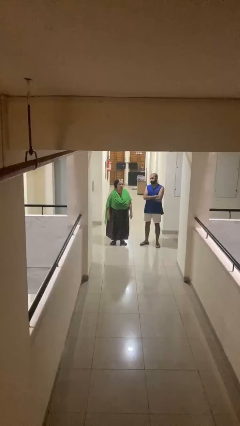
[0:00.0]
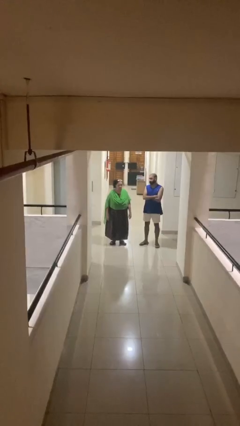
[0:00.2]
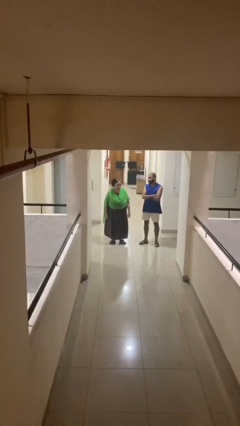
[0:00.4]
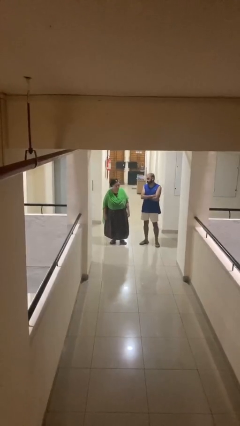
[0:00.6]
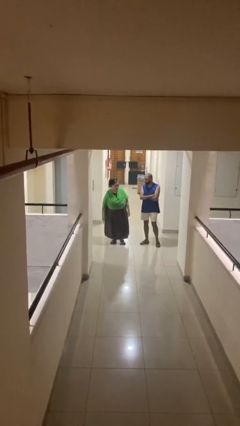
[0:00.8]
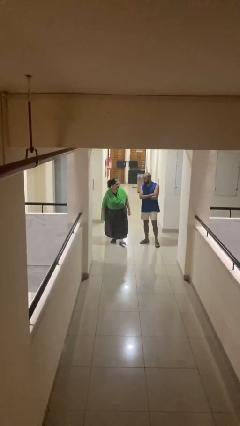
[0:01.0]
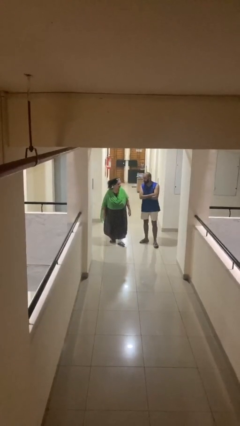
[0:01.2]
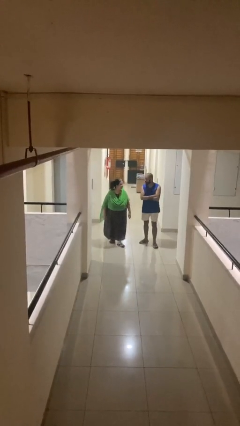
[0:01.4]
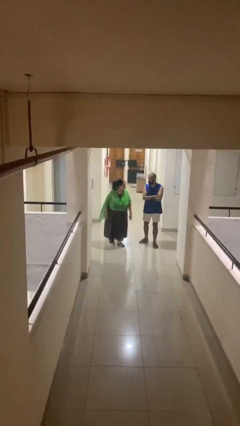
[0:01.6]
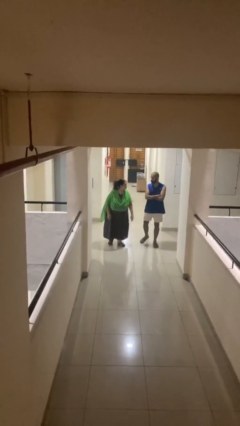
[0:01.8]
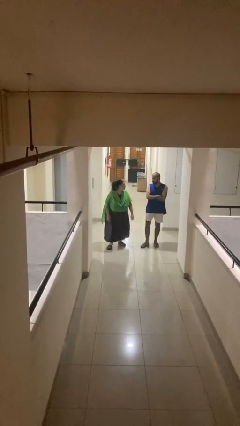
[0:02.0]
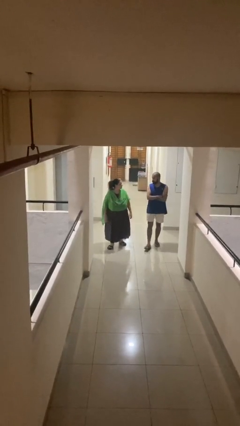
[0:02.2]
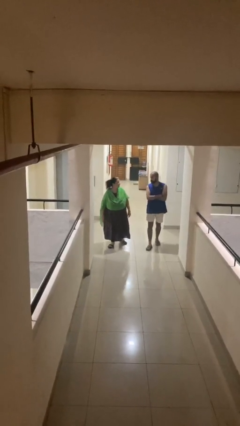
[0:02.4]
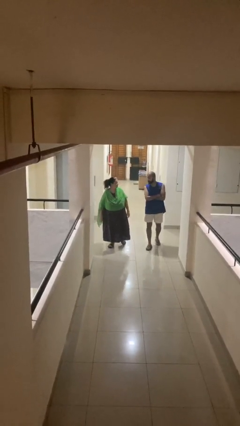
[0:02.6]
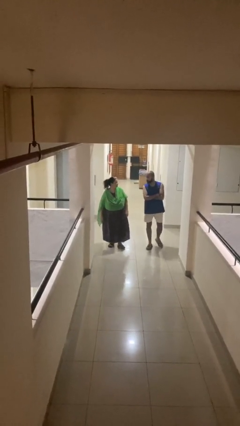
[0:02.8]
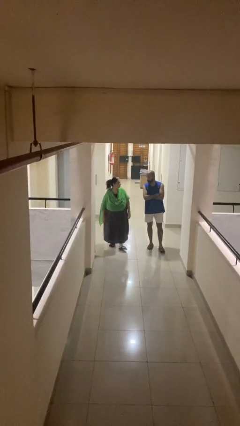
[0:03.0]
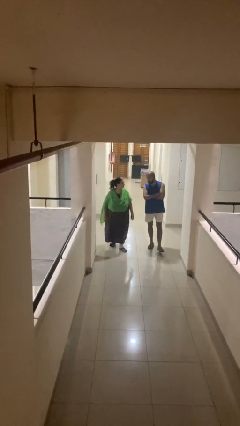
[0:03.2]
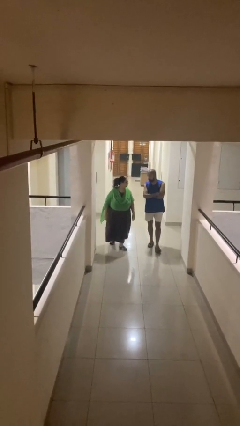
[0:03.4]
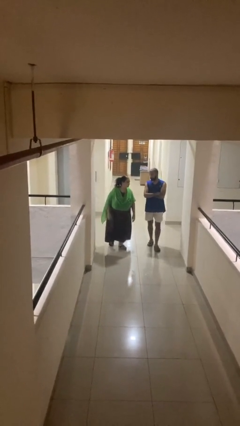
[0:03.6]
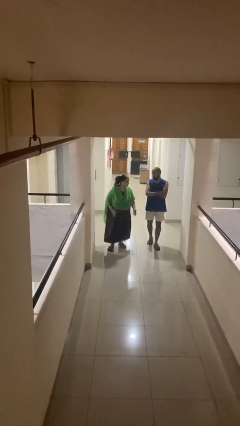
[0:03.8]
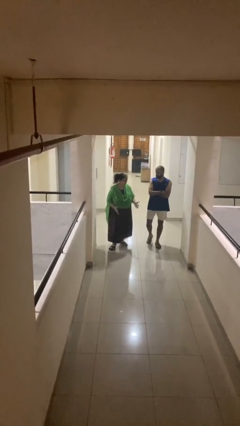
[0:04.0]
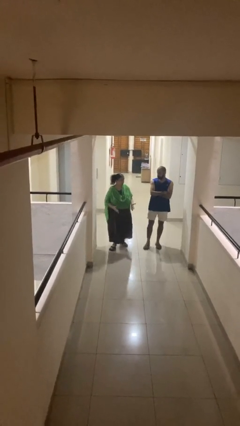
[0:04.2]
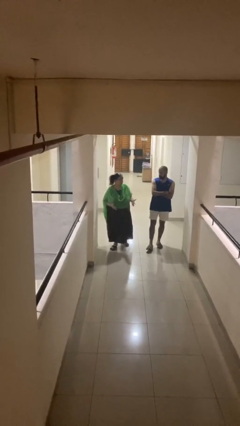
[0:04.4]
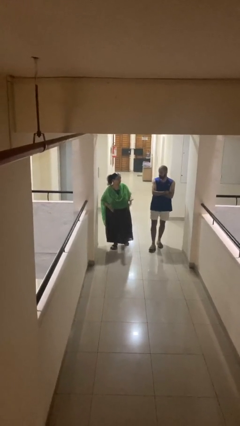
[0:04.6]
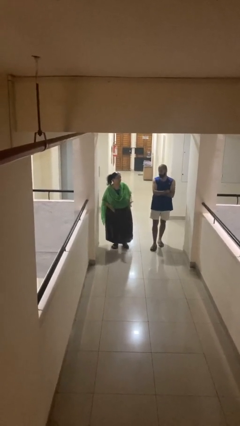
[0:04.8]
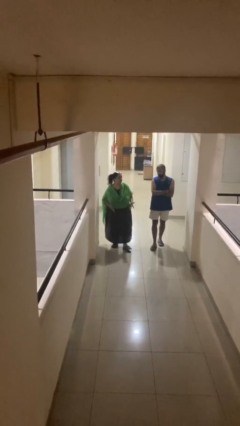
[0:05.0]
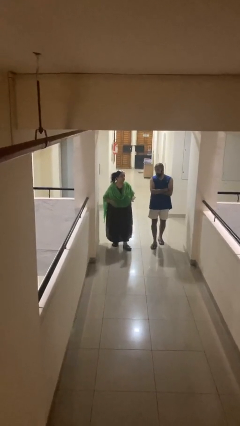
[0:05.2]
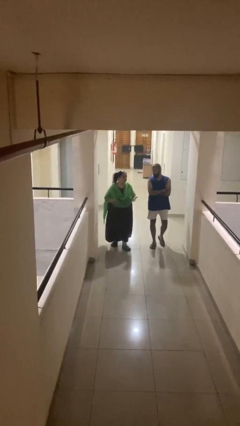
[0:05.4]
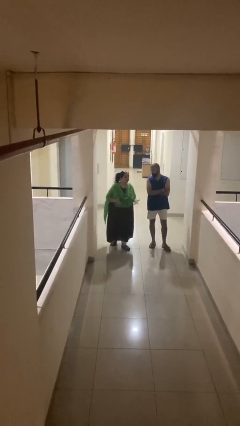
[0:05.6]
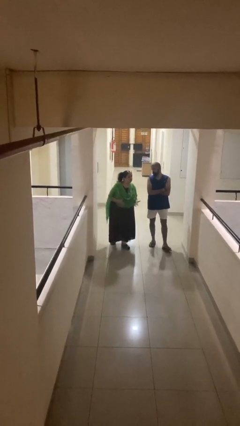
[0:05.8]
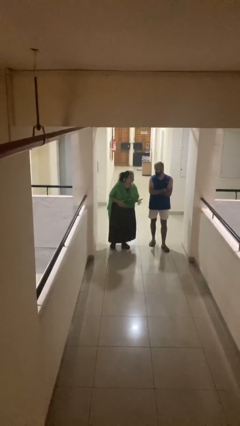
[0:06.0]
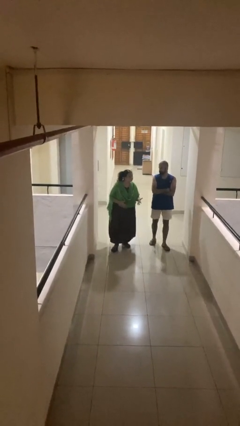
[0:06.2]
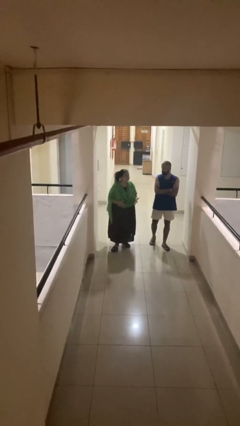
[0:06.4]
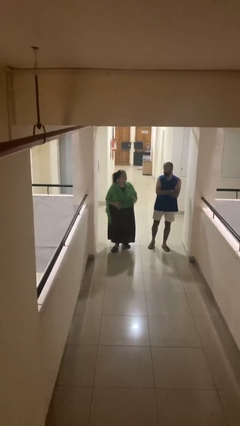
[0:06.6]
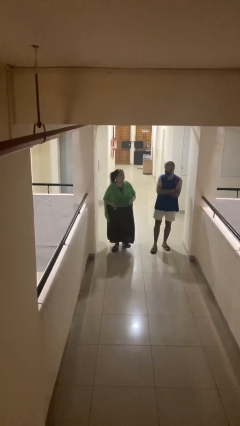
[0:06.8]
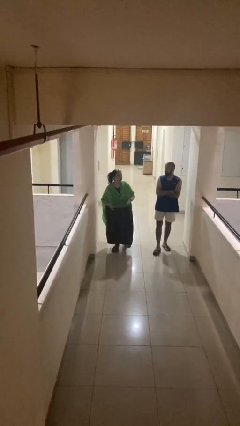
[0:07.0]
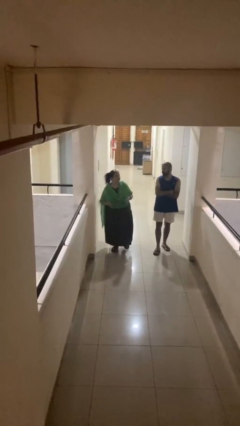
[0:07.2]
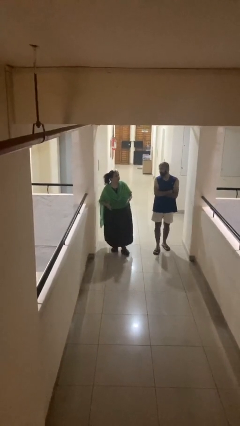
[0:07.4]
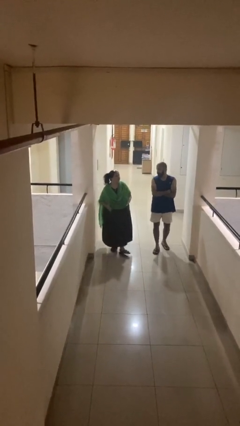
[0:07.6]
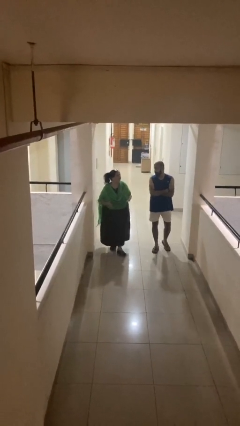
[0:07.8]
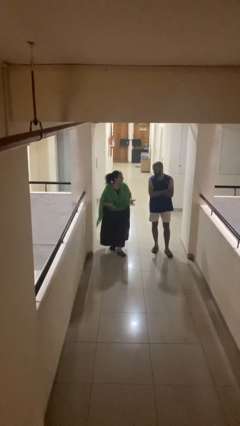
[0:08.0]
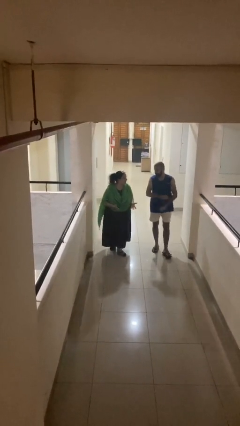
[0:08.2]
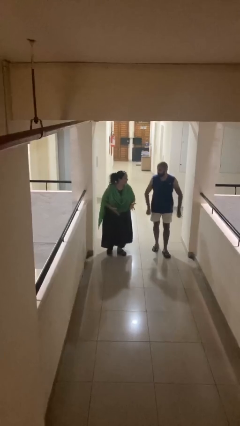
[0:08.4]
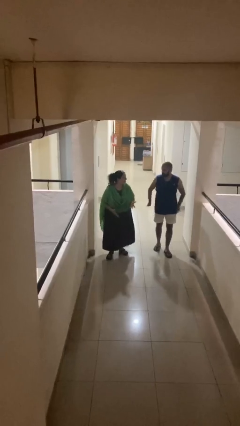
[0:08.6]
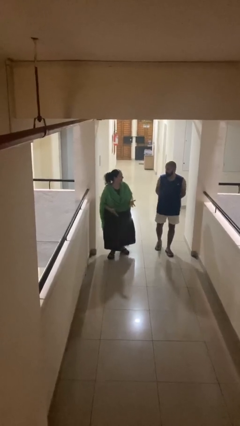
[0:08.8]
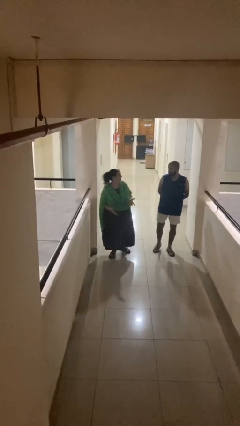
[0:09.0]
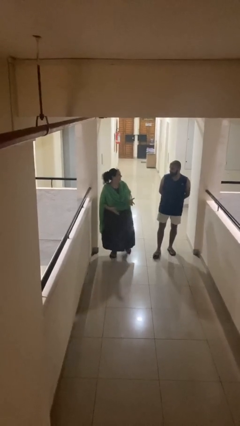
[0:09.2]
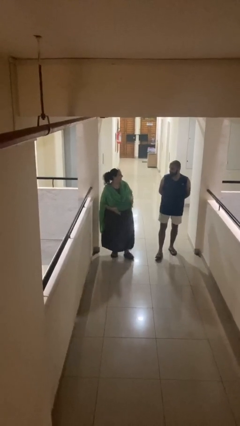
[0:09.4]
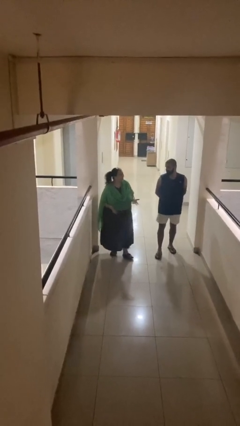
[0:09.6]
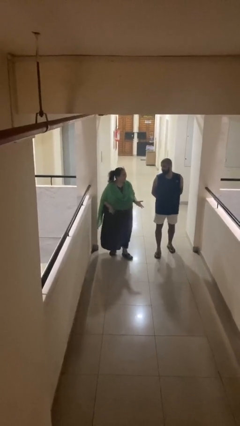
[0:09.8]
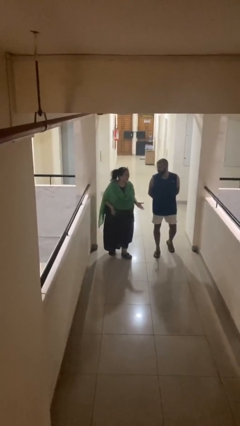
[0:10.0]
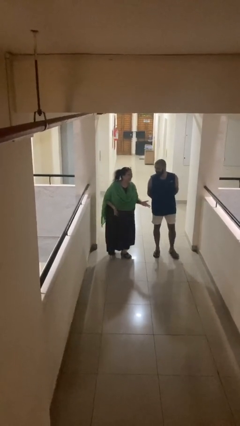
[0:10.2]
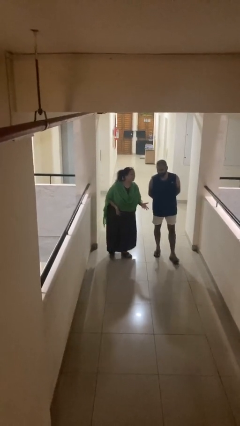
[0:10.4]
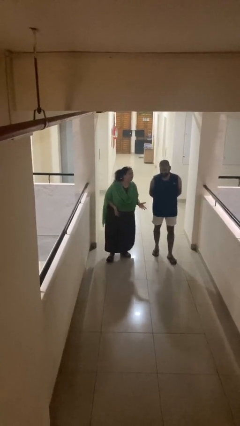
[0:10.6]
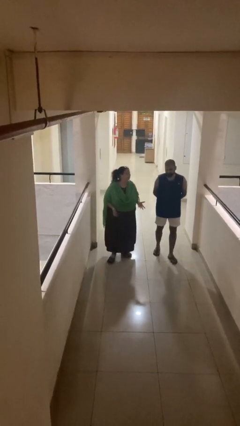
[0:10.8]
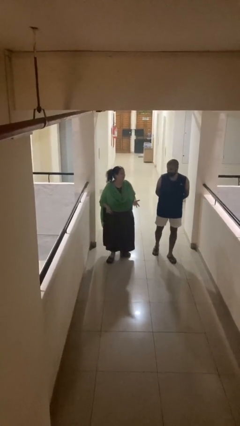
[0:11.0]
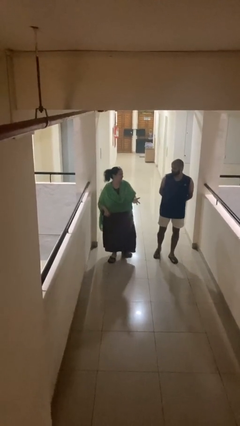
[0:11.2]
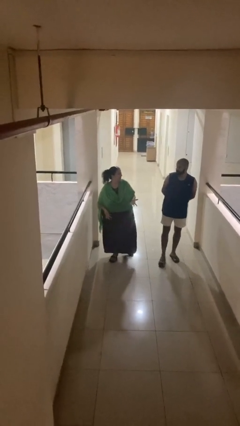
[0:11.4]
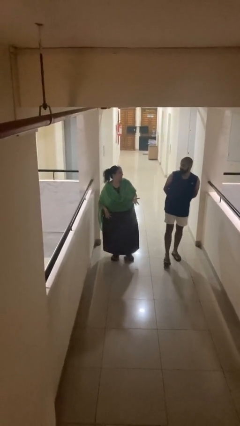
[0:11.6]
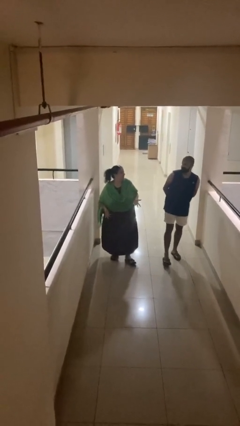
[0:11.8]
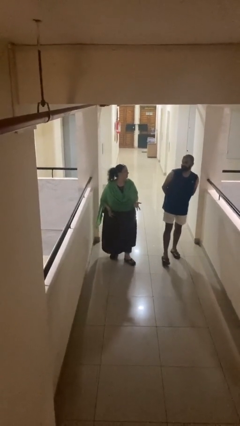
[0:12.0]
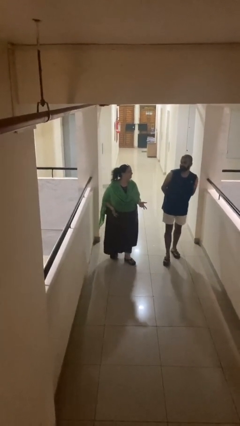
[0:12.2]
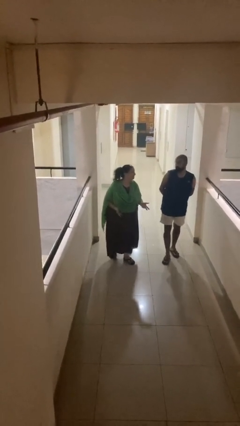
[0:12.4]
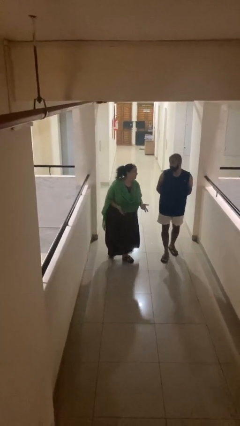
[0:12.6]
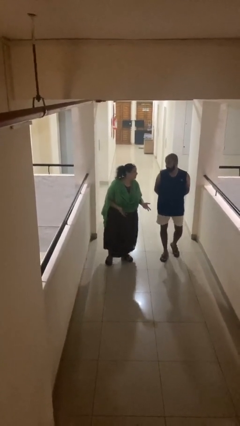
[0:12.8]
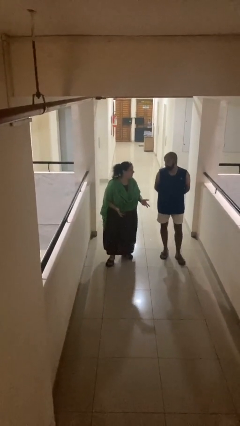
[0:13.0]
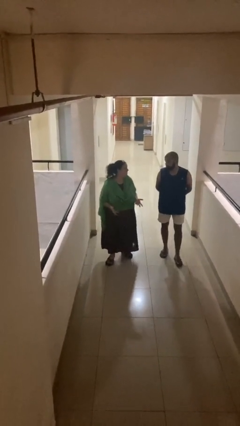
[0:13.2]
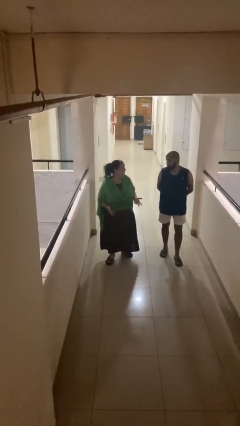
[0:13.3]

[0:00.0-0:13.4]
person talks to person

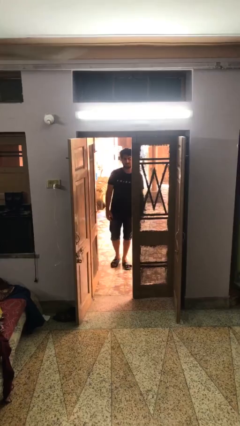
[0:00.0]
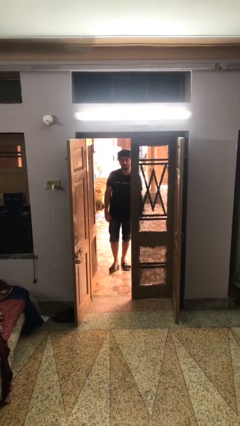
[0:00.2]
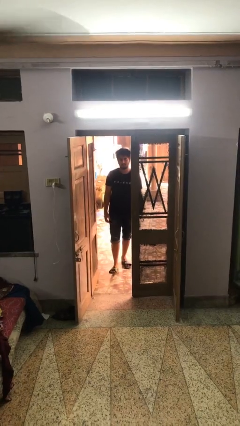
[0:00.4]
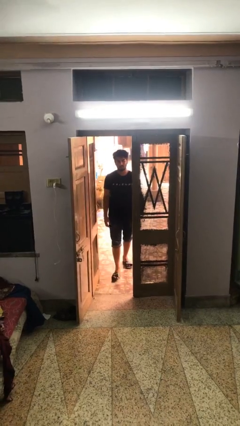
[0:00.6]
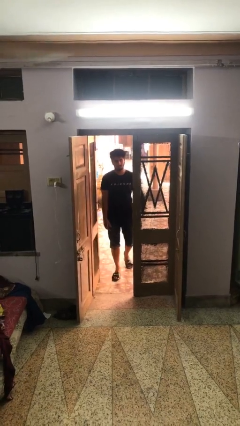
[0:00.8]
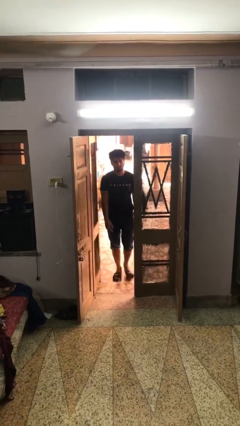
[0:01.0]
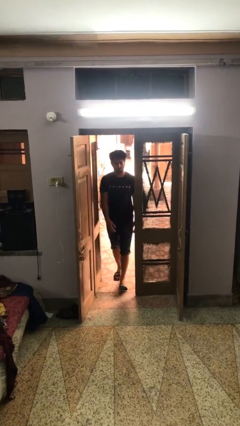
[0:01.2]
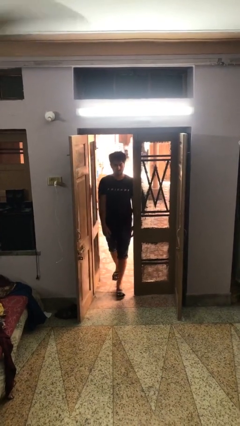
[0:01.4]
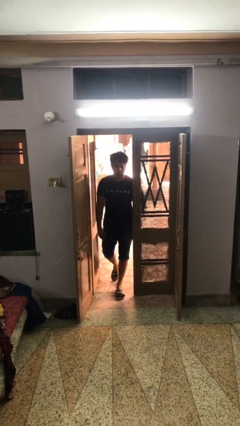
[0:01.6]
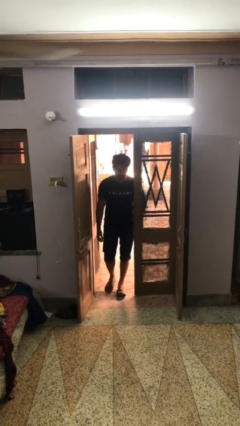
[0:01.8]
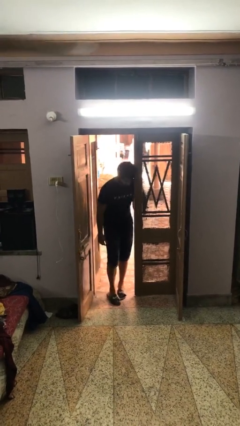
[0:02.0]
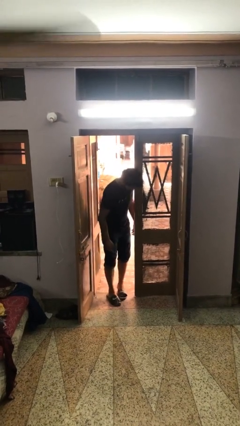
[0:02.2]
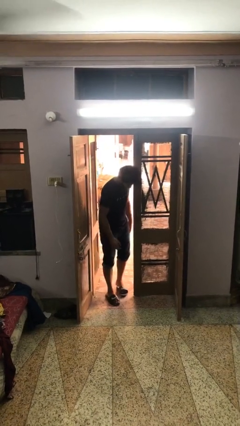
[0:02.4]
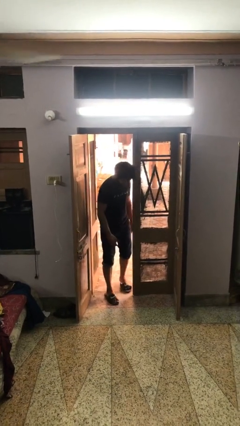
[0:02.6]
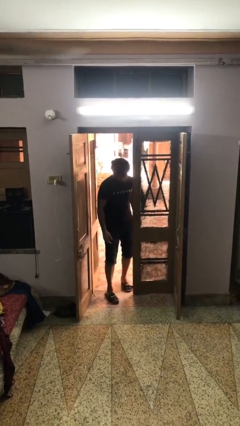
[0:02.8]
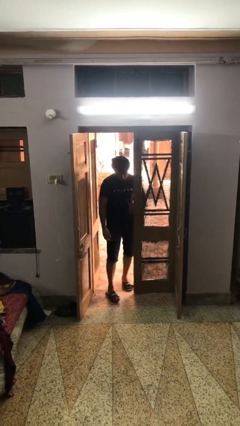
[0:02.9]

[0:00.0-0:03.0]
person bumps into wall

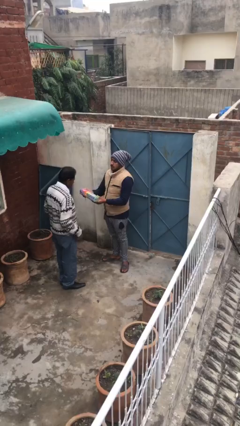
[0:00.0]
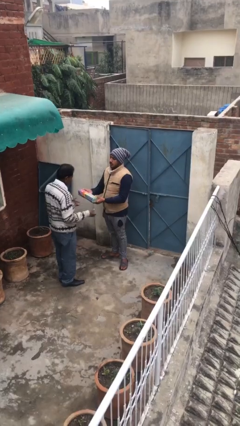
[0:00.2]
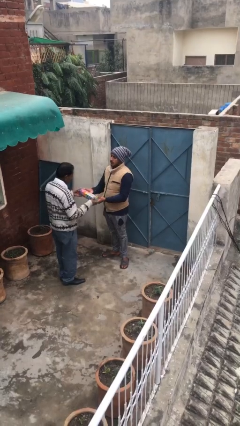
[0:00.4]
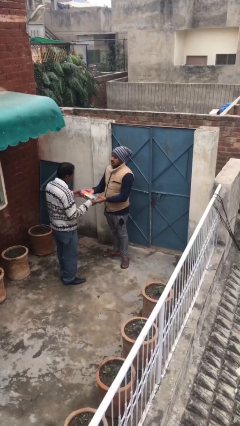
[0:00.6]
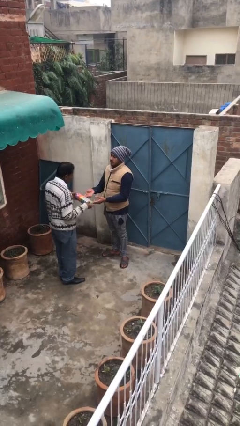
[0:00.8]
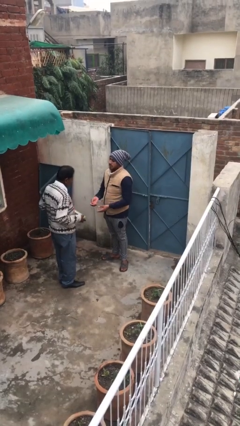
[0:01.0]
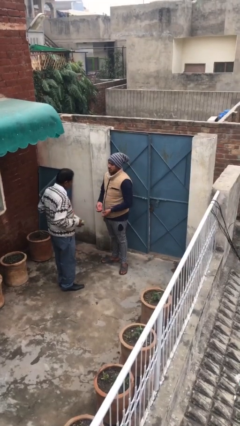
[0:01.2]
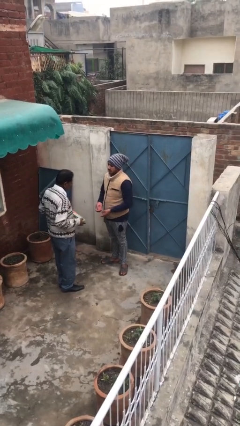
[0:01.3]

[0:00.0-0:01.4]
person transfers object to person

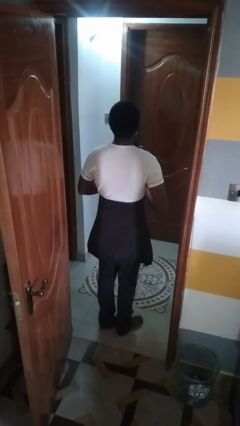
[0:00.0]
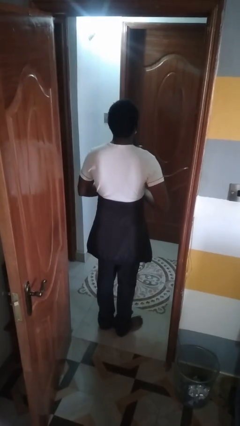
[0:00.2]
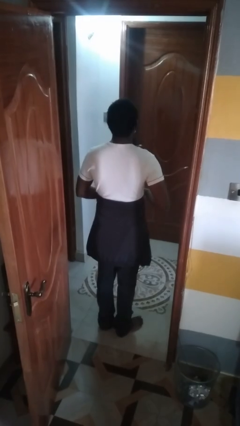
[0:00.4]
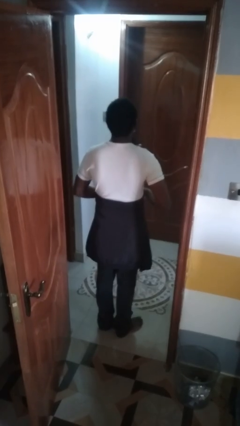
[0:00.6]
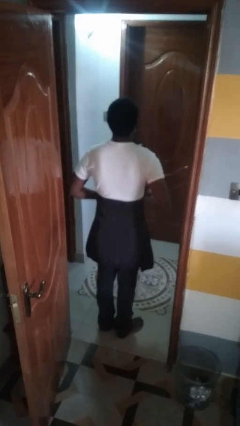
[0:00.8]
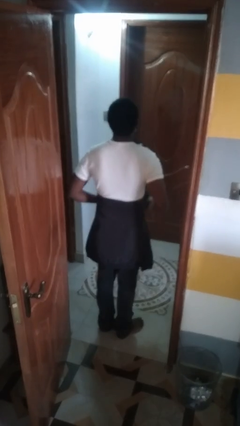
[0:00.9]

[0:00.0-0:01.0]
person ties jacket around waist
